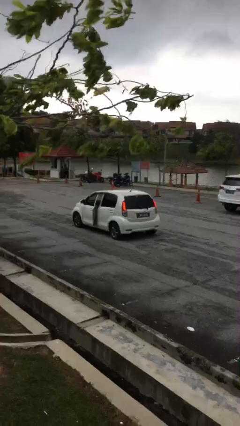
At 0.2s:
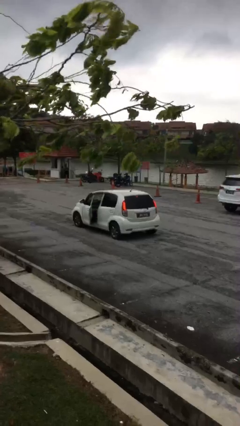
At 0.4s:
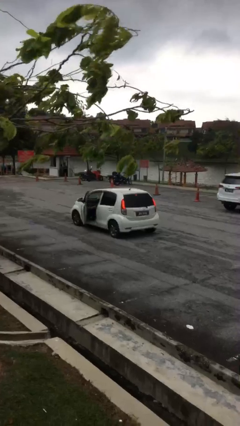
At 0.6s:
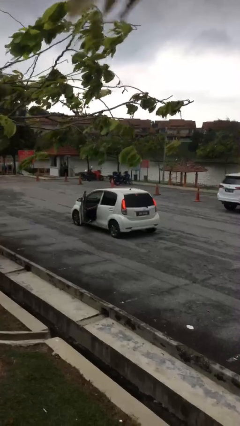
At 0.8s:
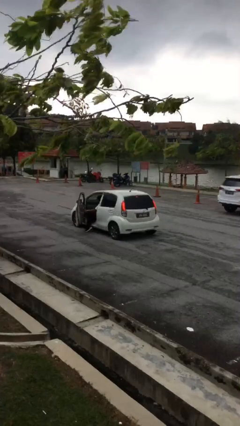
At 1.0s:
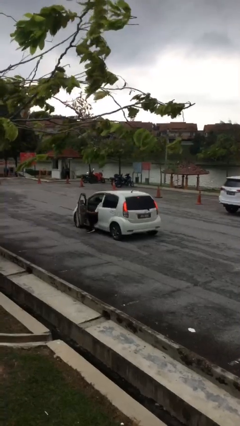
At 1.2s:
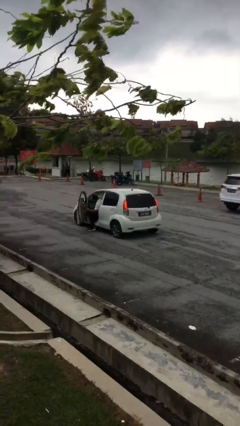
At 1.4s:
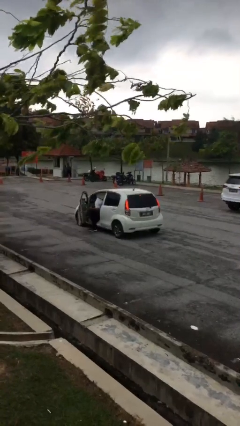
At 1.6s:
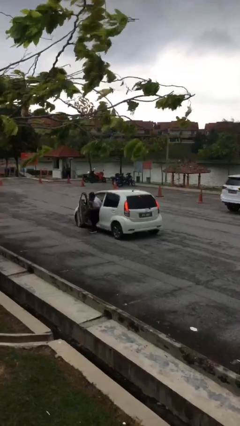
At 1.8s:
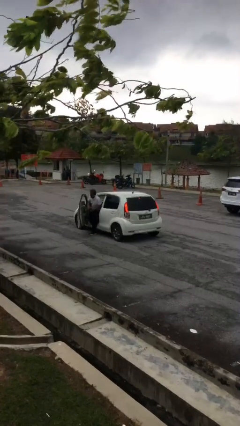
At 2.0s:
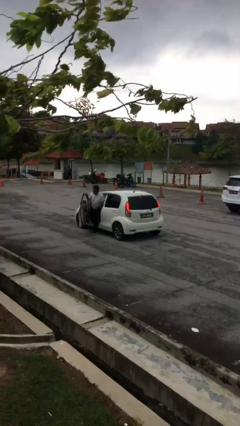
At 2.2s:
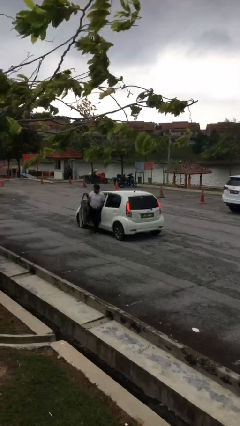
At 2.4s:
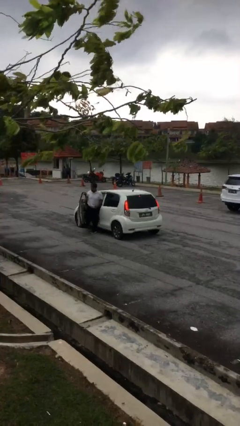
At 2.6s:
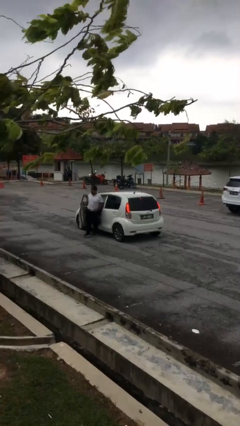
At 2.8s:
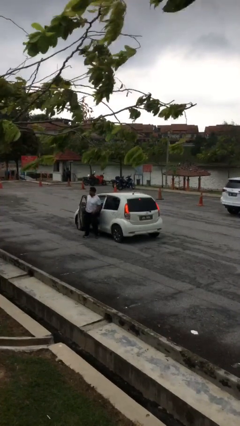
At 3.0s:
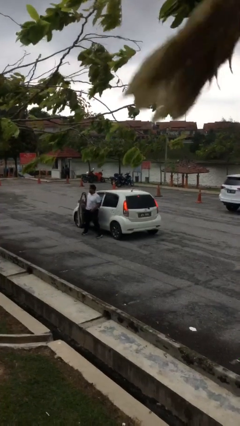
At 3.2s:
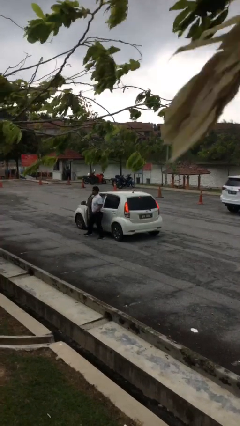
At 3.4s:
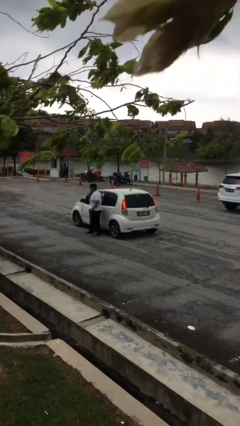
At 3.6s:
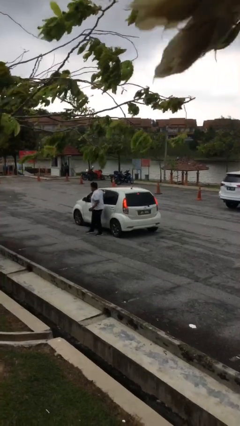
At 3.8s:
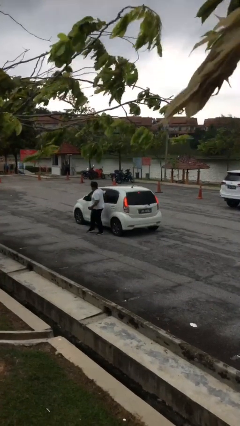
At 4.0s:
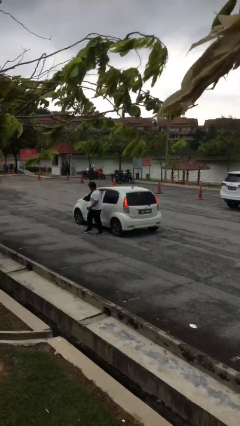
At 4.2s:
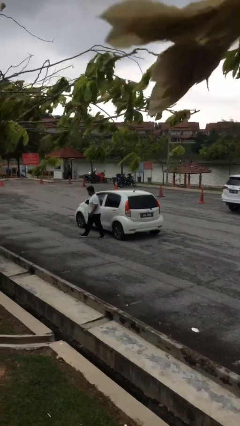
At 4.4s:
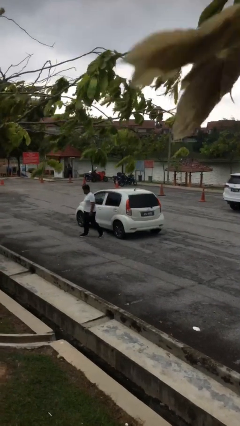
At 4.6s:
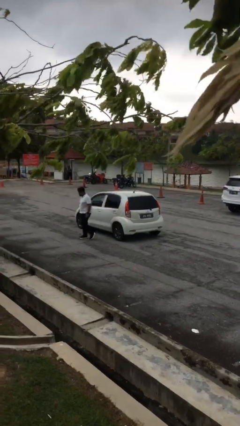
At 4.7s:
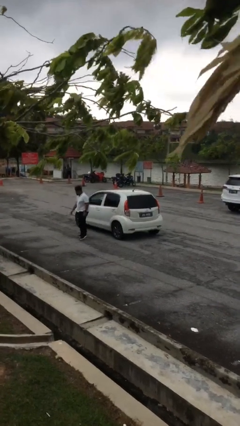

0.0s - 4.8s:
car drops off person

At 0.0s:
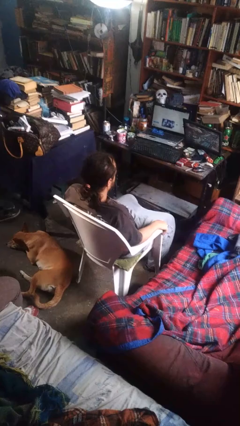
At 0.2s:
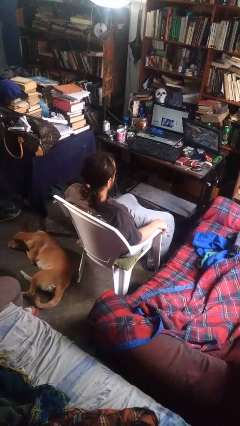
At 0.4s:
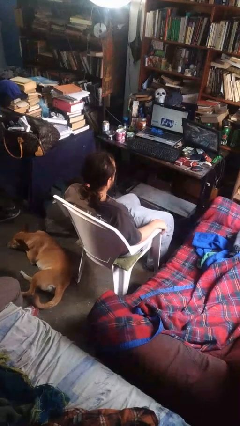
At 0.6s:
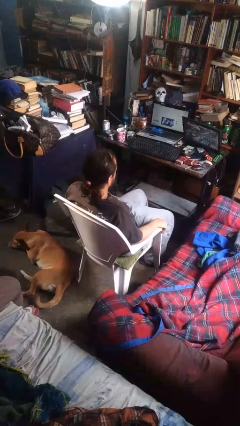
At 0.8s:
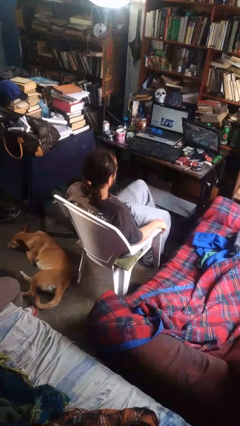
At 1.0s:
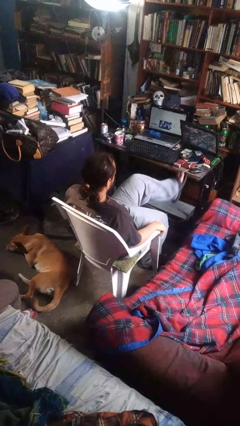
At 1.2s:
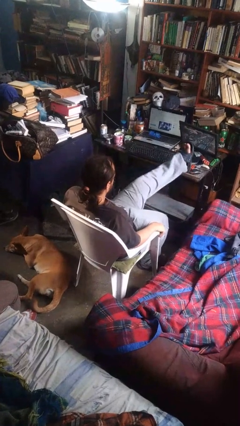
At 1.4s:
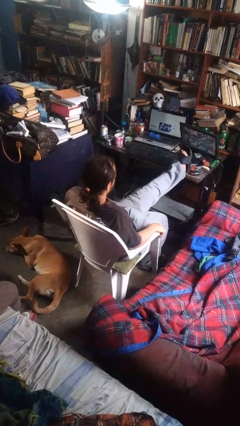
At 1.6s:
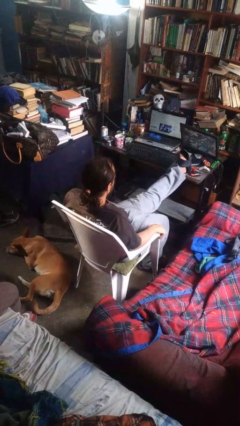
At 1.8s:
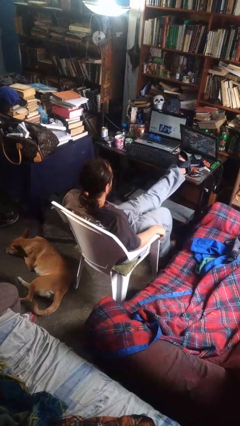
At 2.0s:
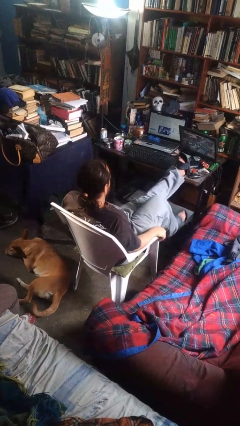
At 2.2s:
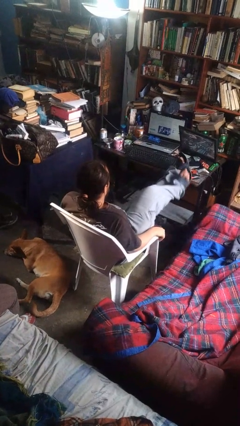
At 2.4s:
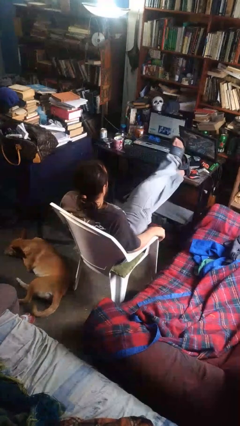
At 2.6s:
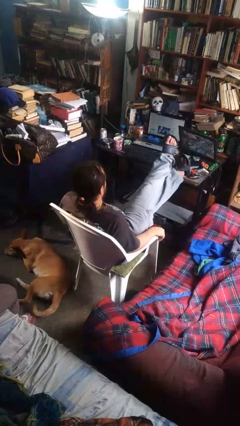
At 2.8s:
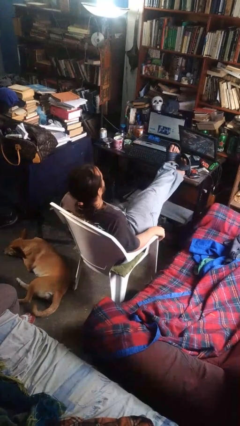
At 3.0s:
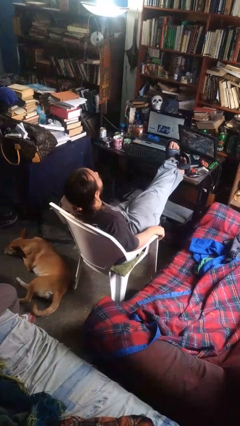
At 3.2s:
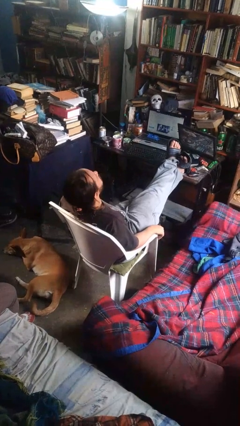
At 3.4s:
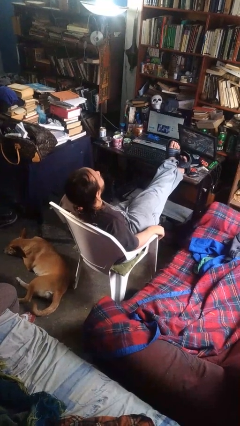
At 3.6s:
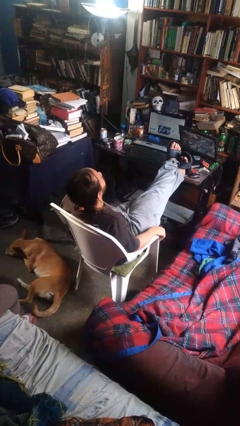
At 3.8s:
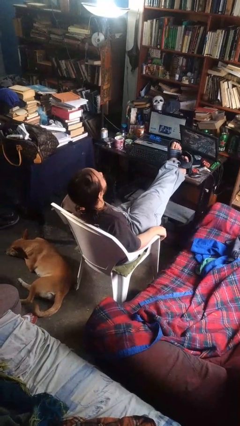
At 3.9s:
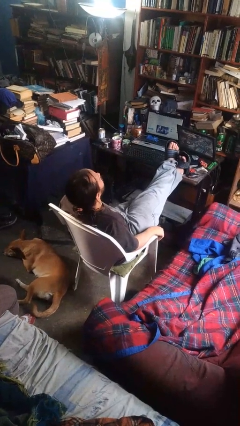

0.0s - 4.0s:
person puts feet up

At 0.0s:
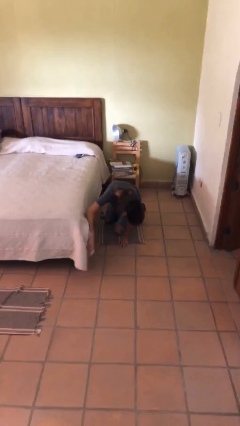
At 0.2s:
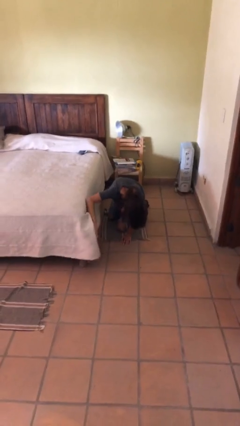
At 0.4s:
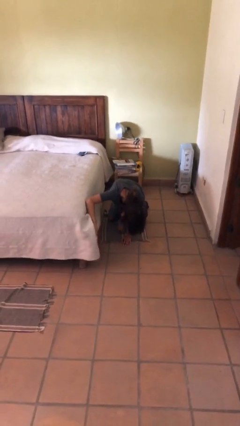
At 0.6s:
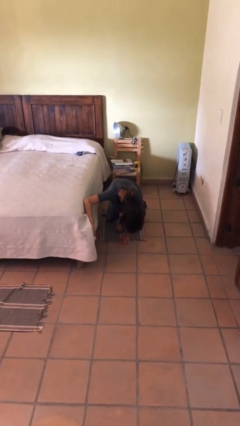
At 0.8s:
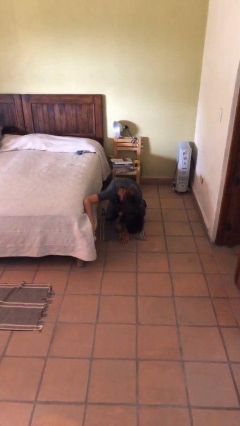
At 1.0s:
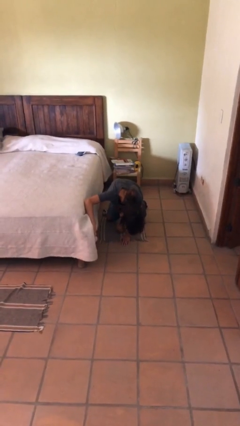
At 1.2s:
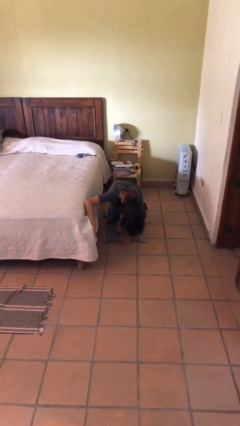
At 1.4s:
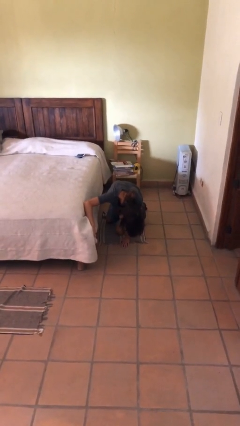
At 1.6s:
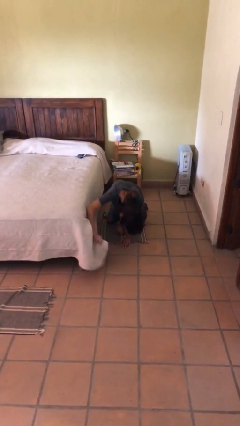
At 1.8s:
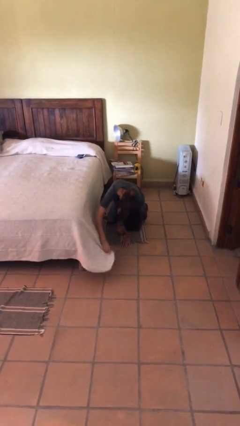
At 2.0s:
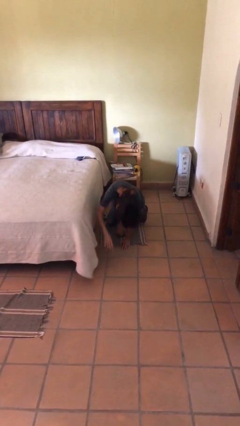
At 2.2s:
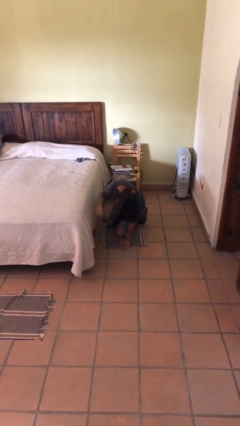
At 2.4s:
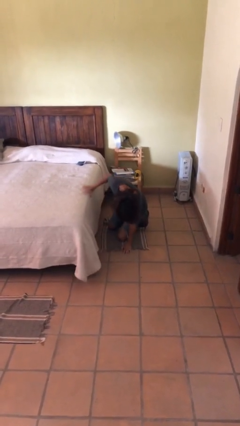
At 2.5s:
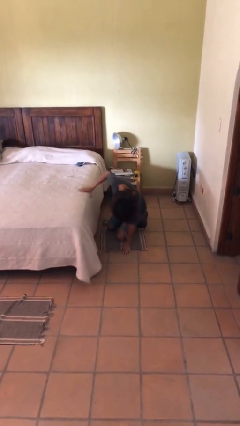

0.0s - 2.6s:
person searches under bed

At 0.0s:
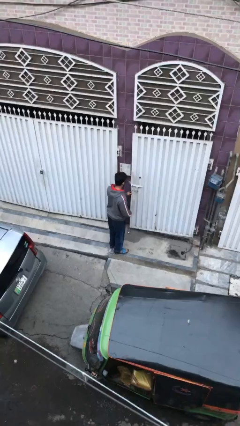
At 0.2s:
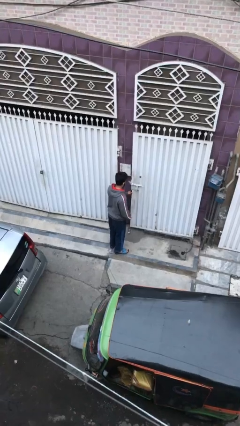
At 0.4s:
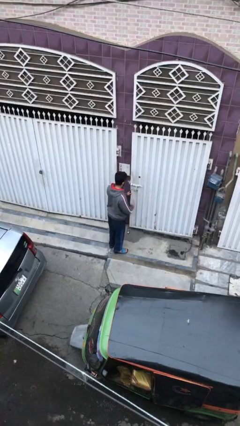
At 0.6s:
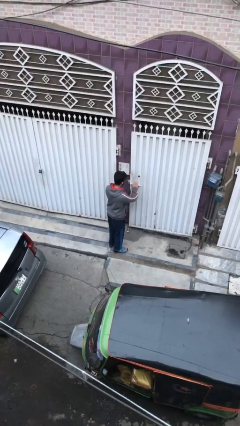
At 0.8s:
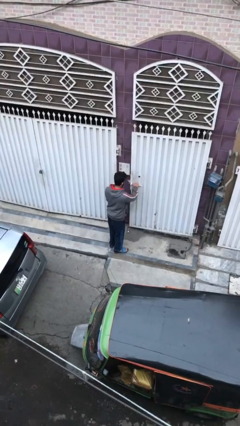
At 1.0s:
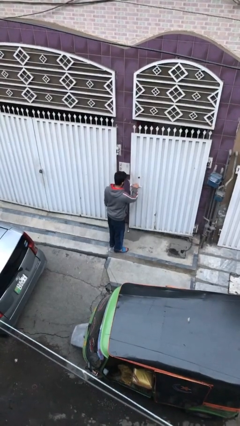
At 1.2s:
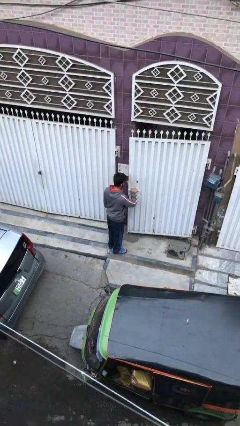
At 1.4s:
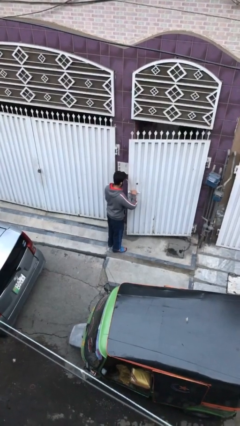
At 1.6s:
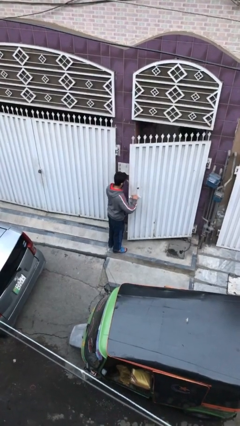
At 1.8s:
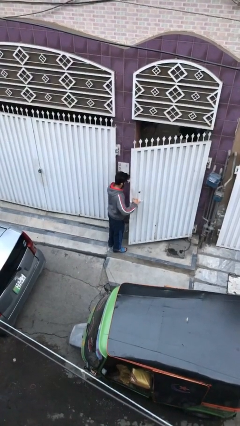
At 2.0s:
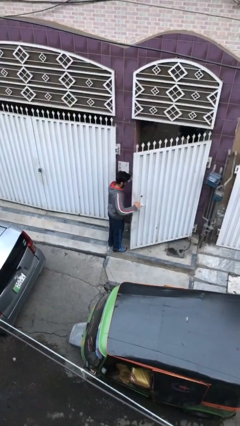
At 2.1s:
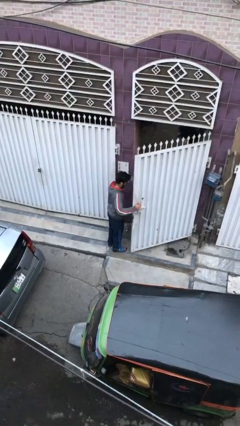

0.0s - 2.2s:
person opens facility door

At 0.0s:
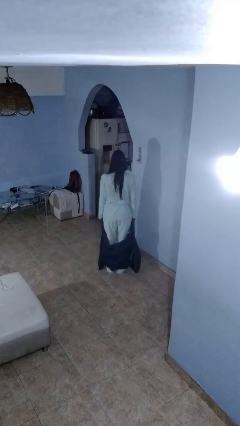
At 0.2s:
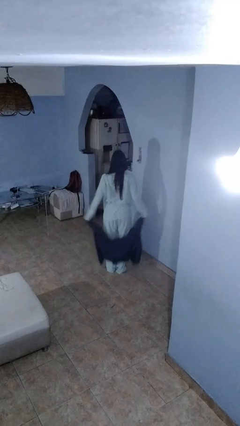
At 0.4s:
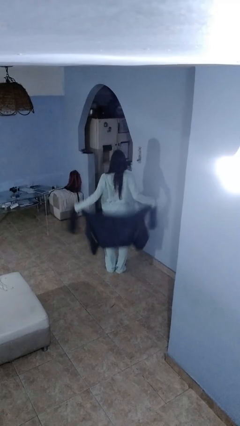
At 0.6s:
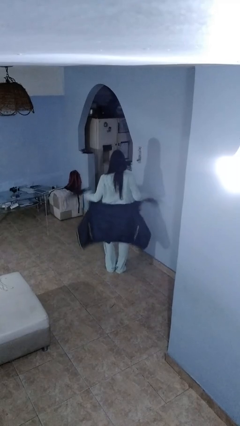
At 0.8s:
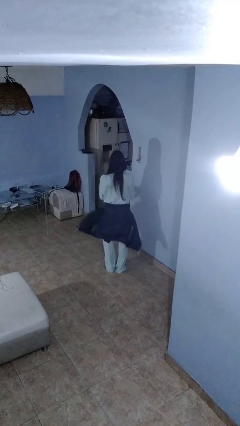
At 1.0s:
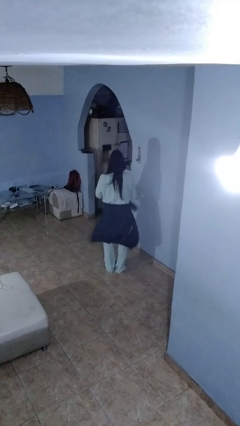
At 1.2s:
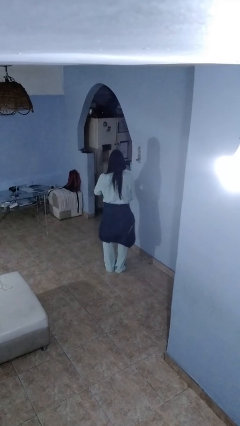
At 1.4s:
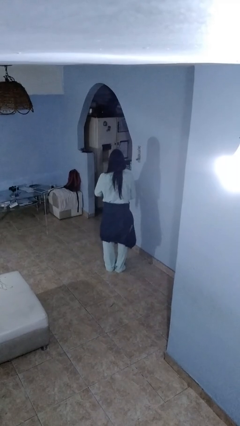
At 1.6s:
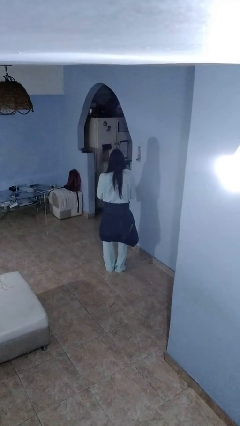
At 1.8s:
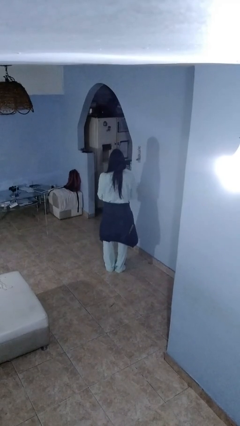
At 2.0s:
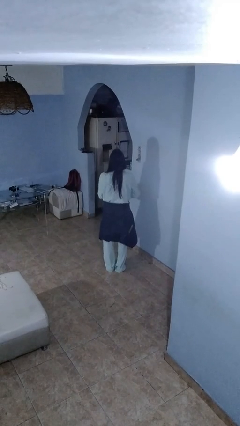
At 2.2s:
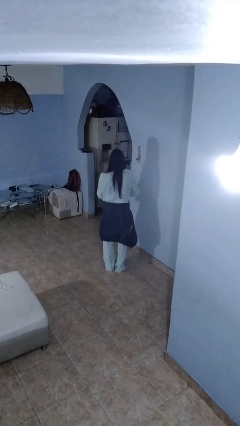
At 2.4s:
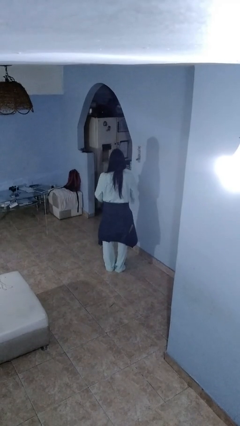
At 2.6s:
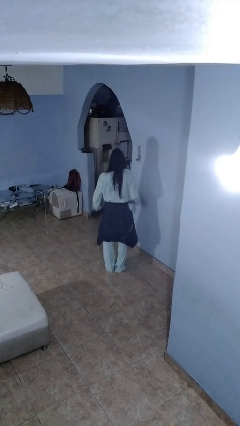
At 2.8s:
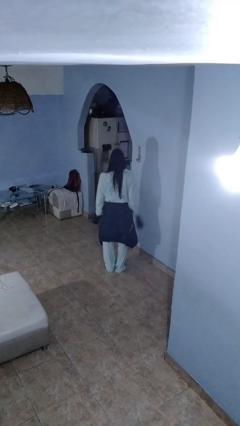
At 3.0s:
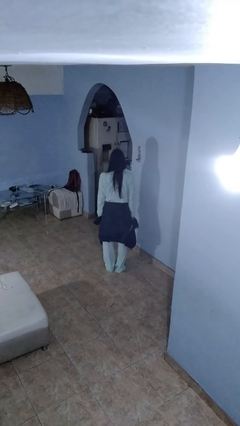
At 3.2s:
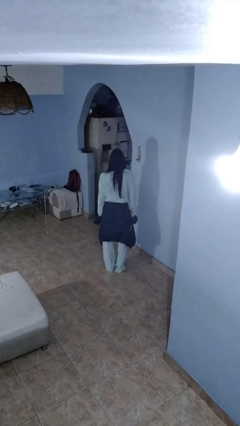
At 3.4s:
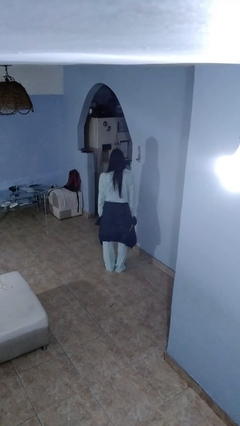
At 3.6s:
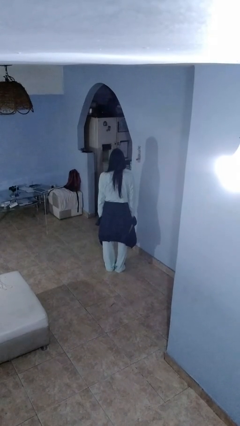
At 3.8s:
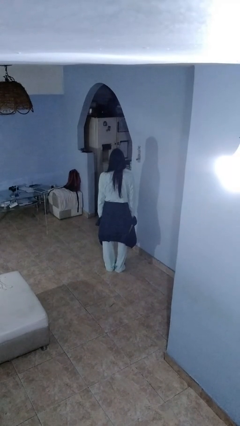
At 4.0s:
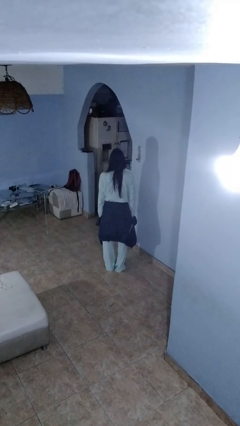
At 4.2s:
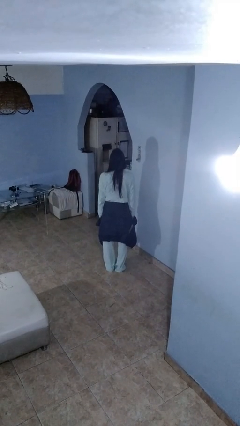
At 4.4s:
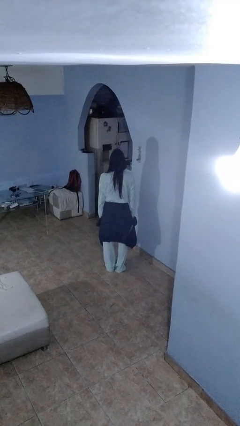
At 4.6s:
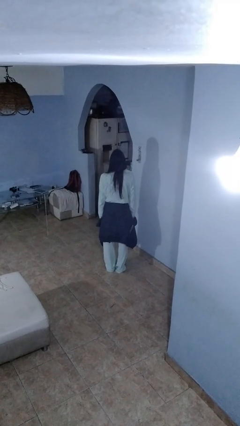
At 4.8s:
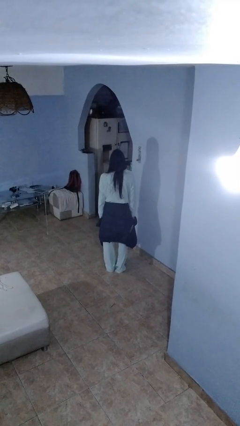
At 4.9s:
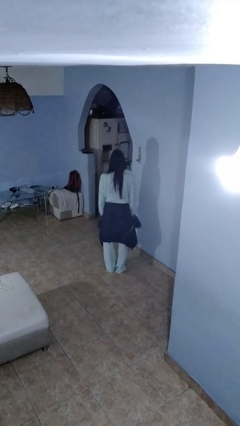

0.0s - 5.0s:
person ties jacket around waist
